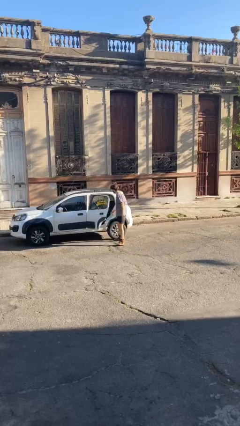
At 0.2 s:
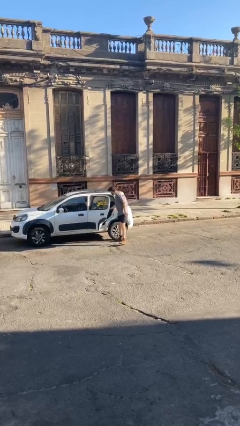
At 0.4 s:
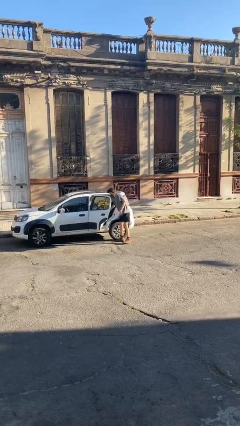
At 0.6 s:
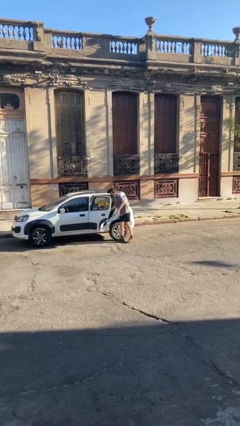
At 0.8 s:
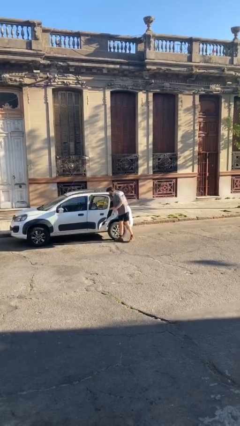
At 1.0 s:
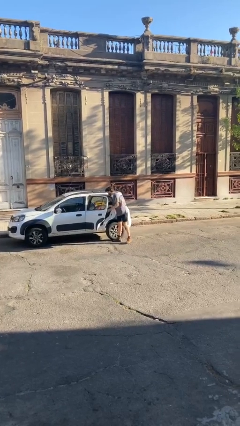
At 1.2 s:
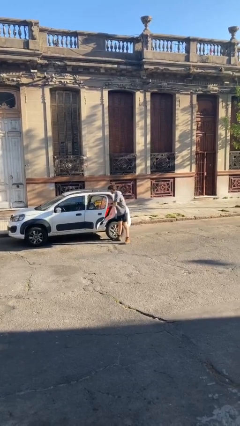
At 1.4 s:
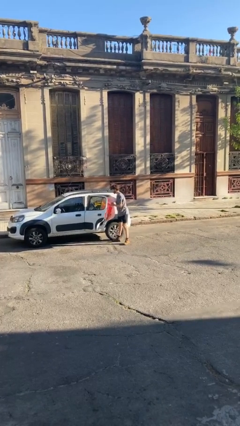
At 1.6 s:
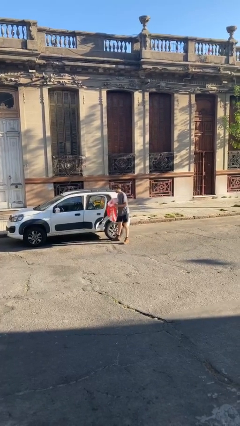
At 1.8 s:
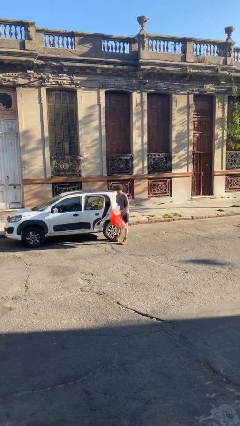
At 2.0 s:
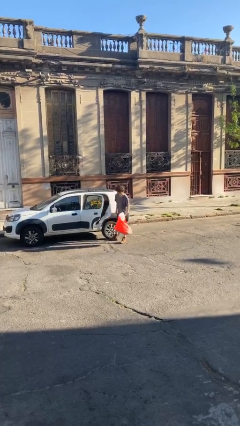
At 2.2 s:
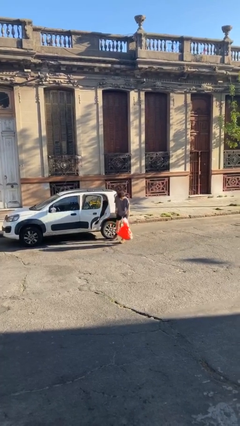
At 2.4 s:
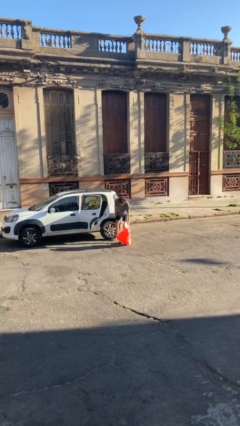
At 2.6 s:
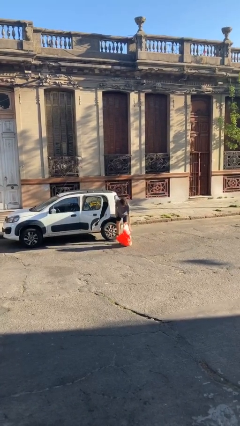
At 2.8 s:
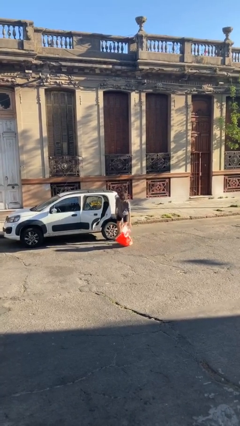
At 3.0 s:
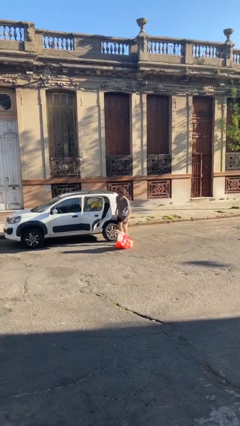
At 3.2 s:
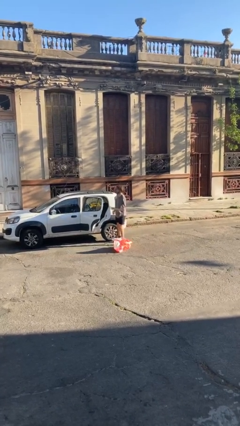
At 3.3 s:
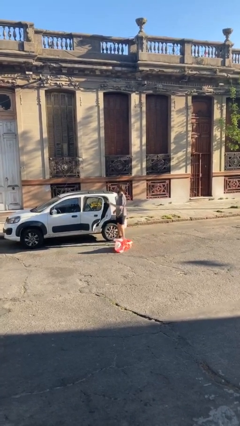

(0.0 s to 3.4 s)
person unloads car

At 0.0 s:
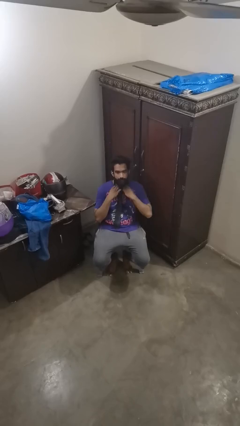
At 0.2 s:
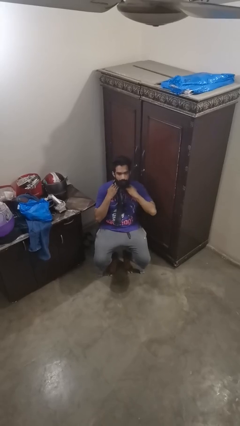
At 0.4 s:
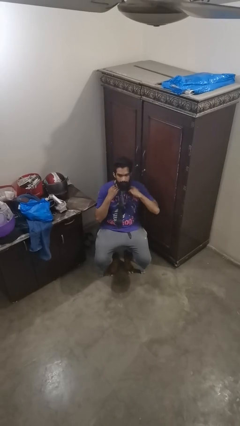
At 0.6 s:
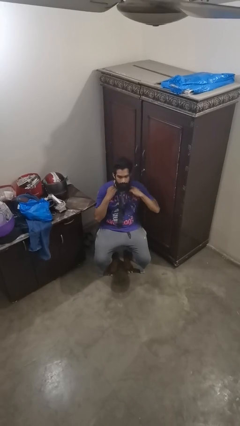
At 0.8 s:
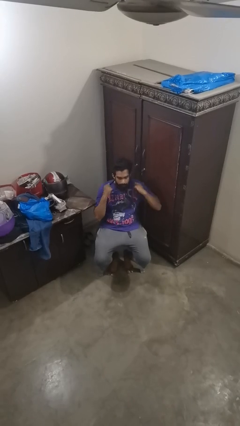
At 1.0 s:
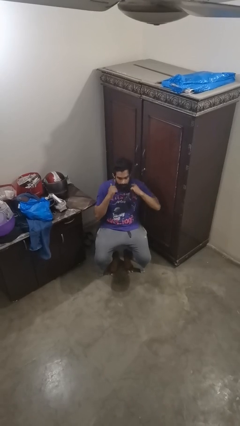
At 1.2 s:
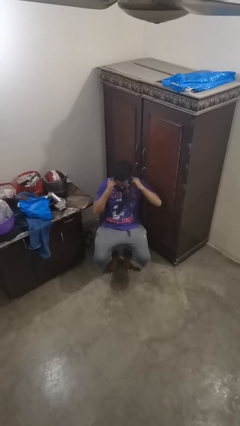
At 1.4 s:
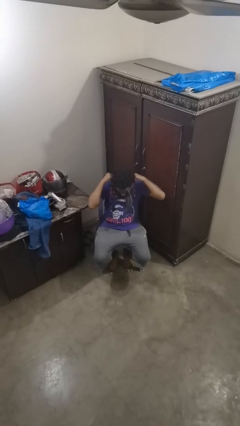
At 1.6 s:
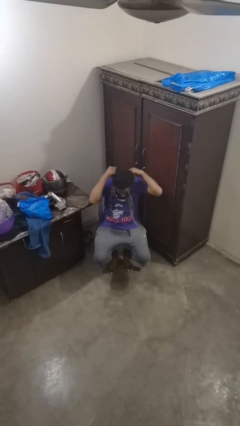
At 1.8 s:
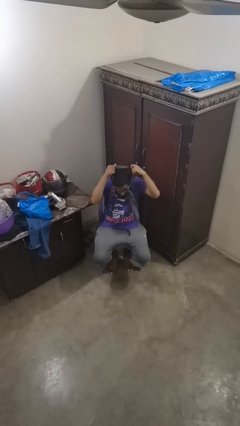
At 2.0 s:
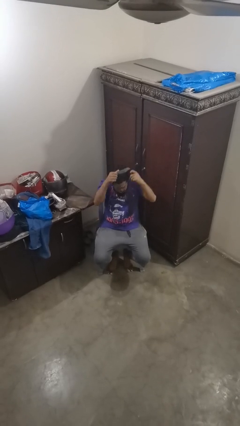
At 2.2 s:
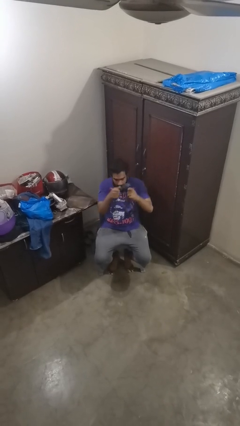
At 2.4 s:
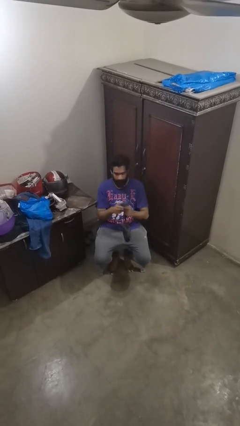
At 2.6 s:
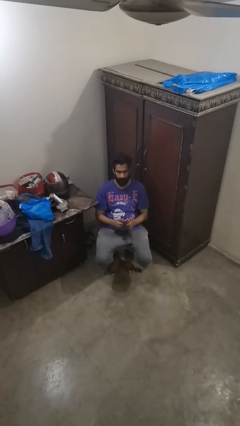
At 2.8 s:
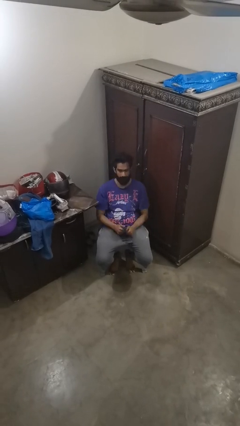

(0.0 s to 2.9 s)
person takes off necktie

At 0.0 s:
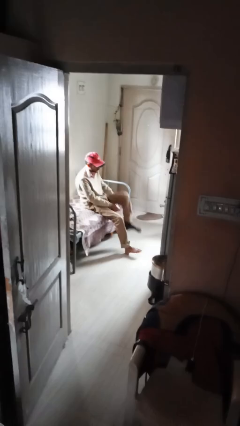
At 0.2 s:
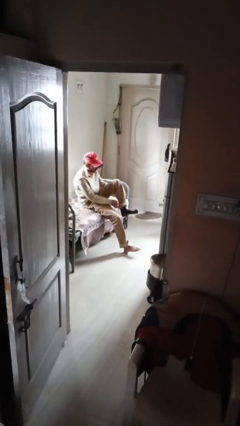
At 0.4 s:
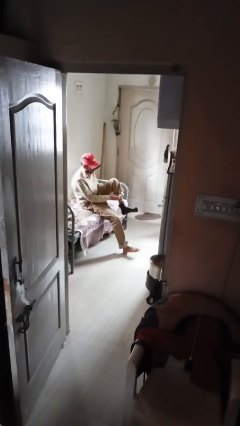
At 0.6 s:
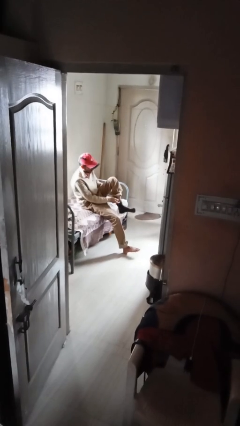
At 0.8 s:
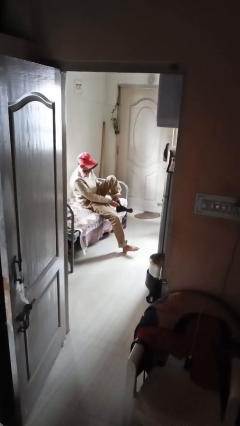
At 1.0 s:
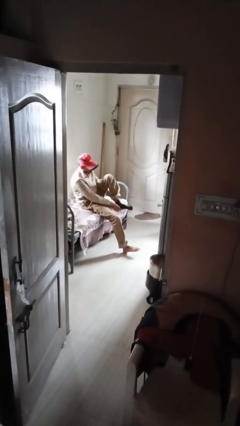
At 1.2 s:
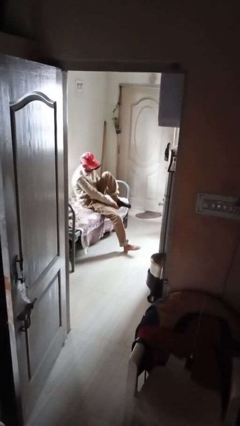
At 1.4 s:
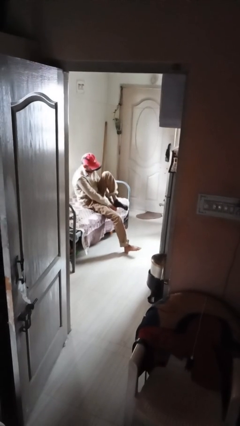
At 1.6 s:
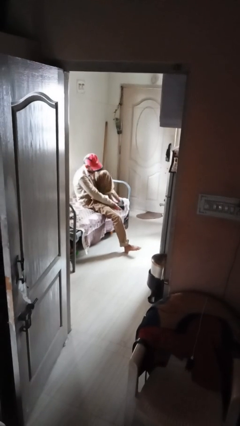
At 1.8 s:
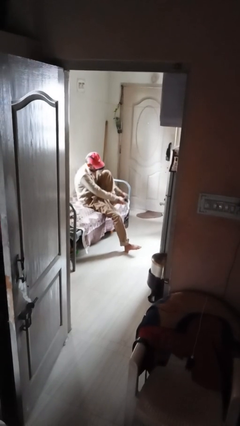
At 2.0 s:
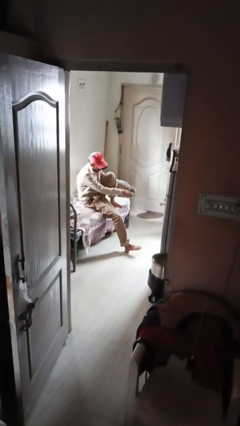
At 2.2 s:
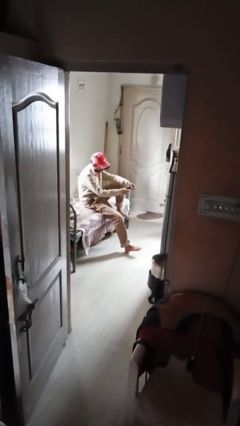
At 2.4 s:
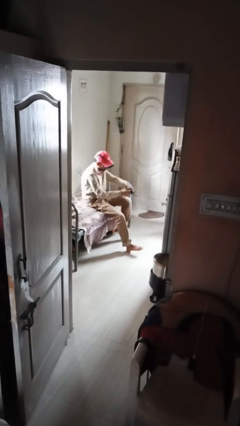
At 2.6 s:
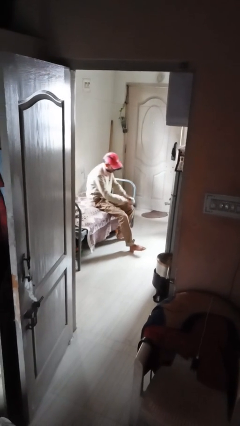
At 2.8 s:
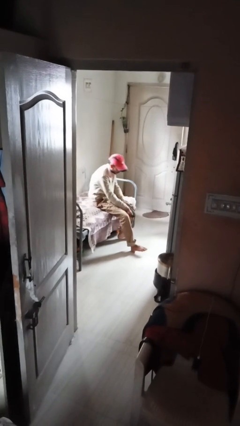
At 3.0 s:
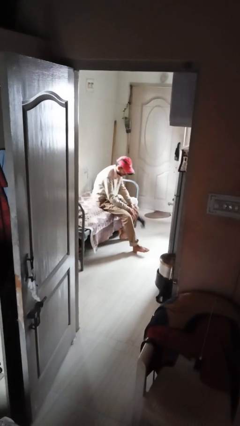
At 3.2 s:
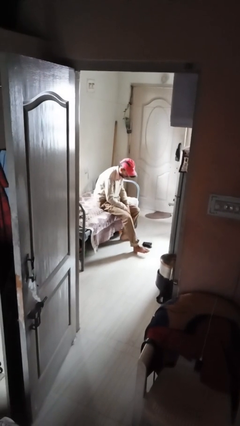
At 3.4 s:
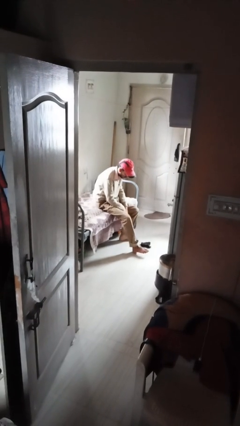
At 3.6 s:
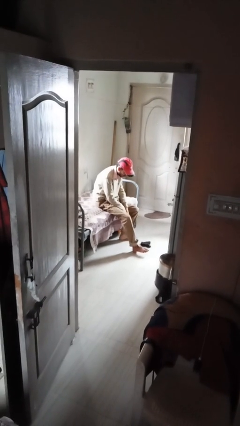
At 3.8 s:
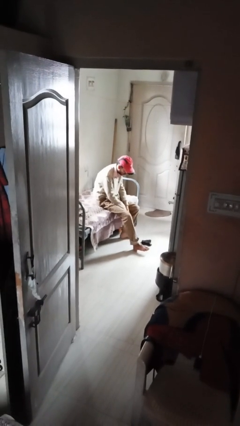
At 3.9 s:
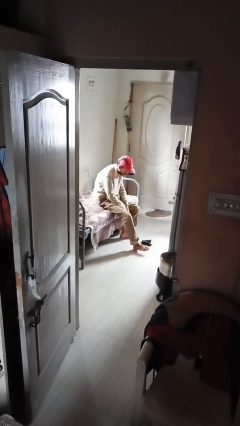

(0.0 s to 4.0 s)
person takes off socks

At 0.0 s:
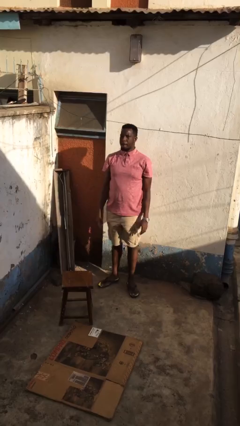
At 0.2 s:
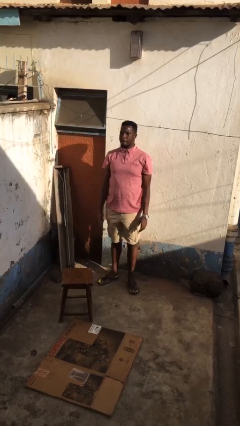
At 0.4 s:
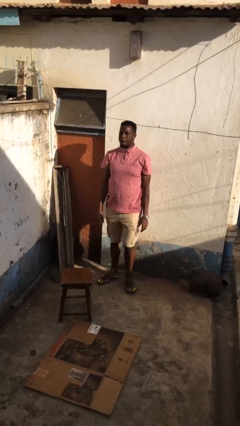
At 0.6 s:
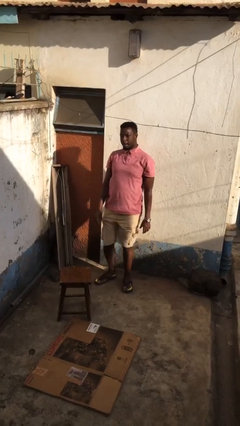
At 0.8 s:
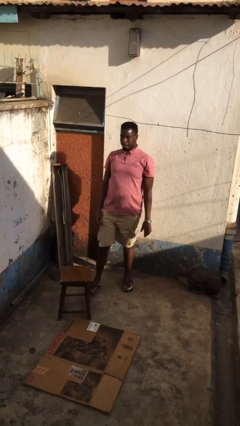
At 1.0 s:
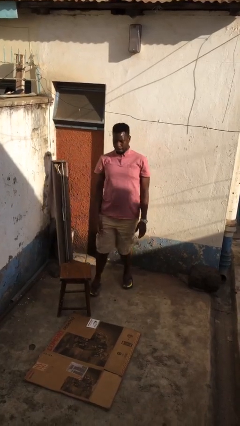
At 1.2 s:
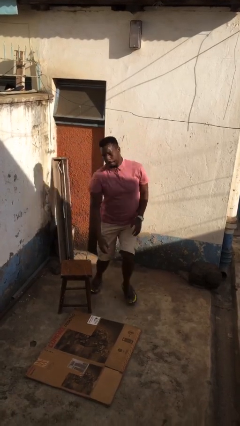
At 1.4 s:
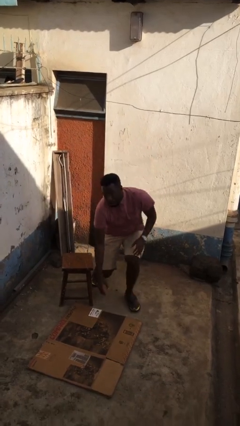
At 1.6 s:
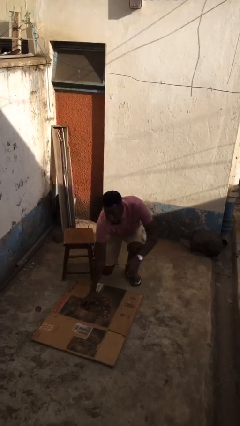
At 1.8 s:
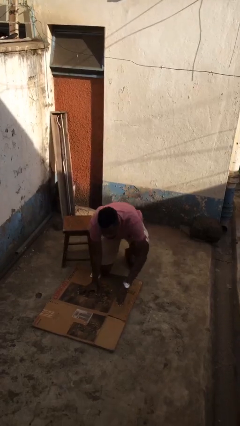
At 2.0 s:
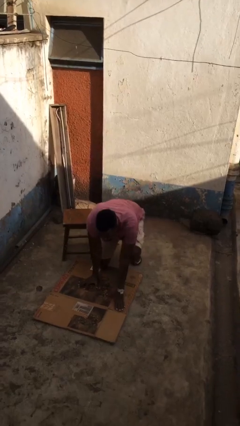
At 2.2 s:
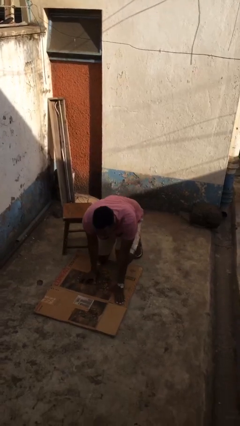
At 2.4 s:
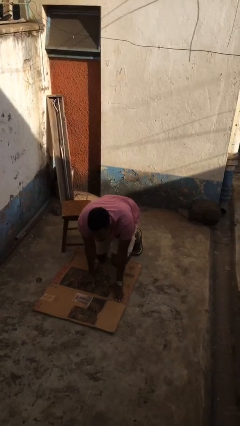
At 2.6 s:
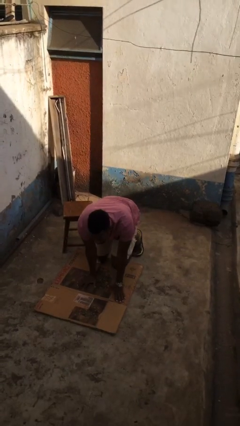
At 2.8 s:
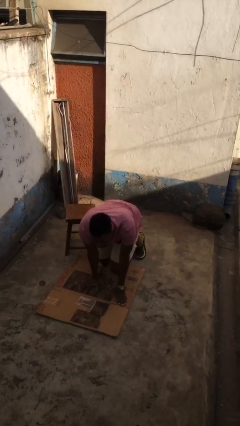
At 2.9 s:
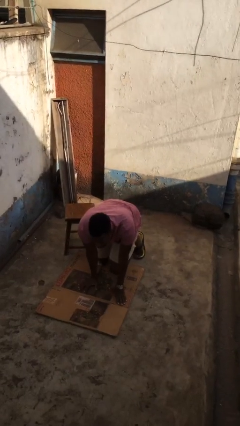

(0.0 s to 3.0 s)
person trips on object on floor

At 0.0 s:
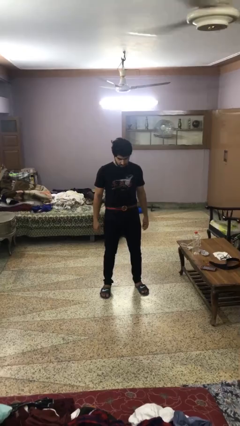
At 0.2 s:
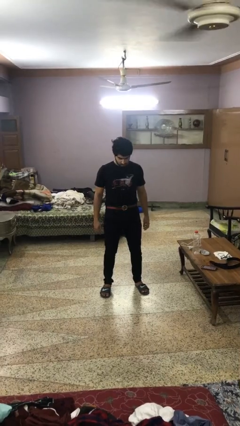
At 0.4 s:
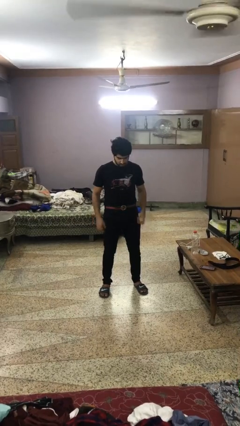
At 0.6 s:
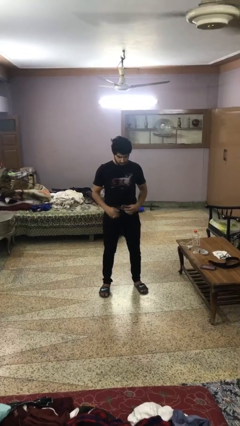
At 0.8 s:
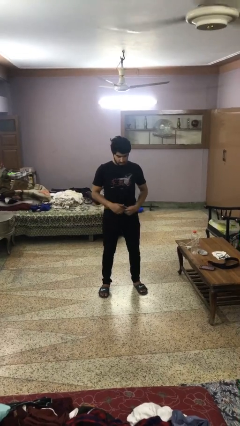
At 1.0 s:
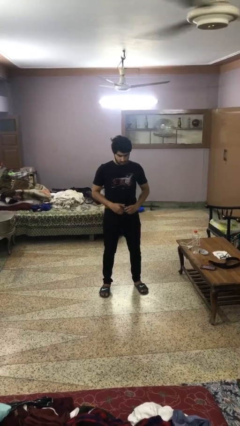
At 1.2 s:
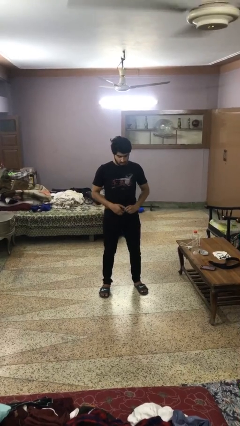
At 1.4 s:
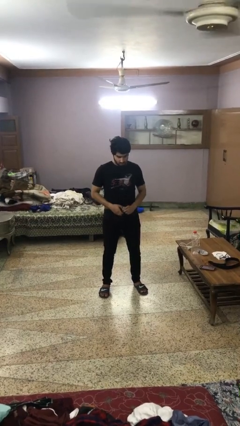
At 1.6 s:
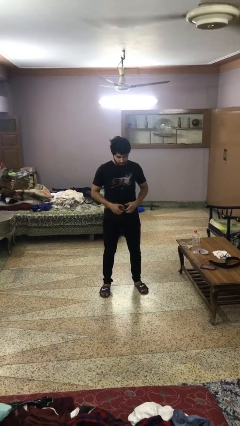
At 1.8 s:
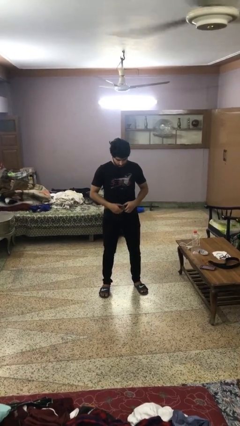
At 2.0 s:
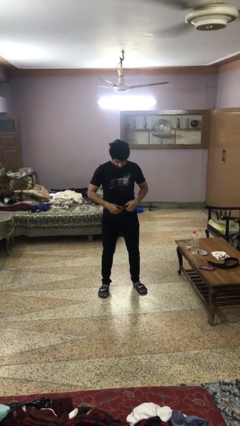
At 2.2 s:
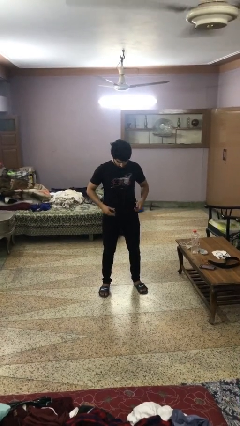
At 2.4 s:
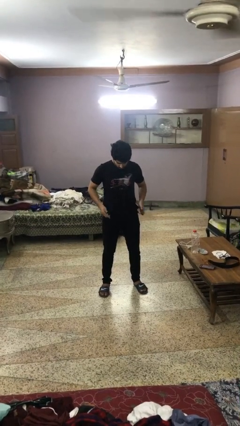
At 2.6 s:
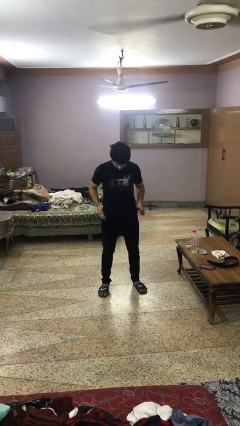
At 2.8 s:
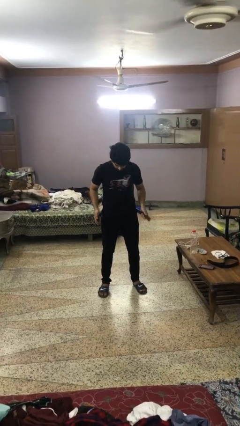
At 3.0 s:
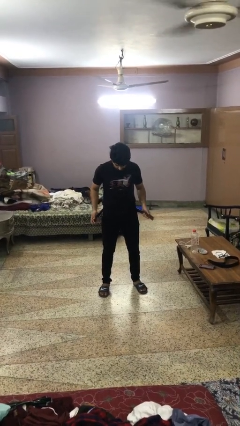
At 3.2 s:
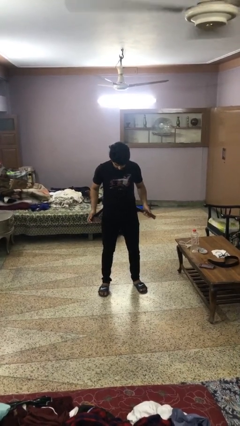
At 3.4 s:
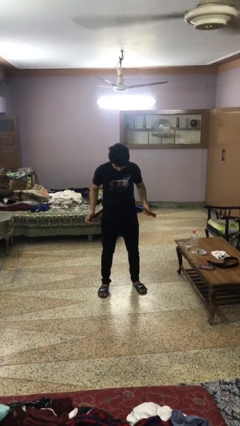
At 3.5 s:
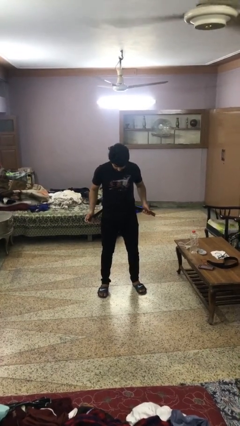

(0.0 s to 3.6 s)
person takes off belt

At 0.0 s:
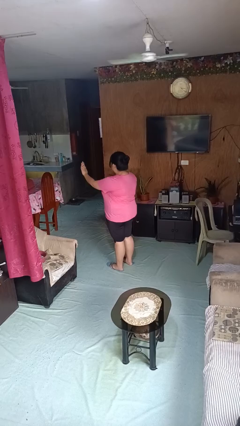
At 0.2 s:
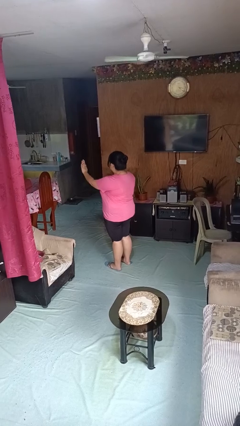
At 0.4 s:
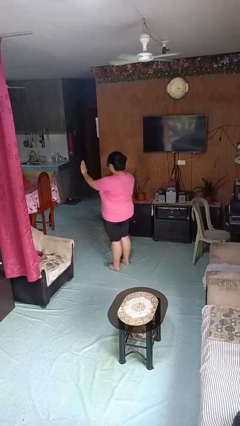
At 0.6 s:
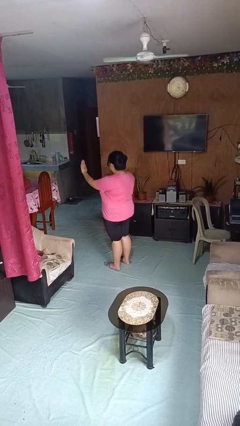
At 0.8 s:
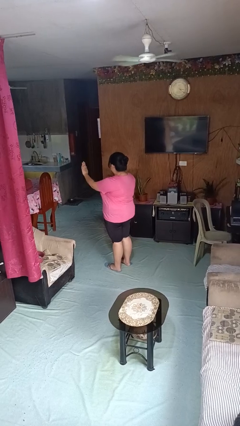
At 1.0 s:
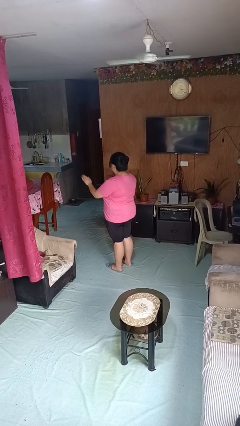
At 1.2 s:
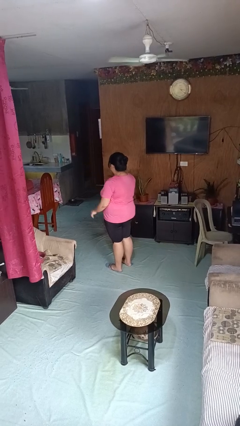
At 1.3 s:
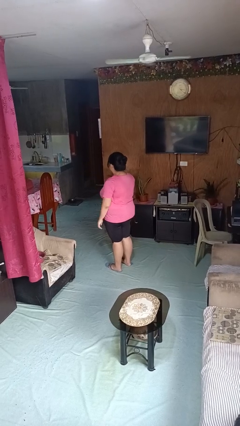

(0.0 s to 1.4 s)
person gestures stop
